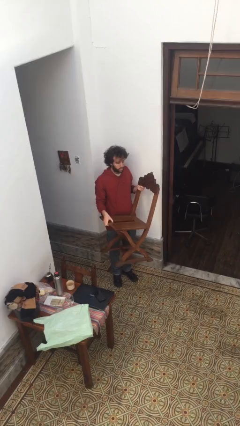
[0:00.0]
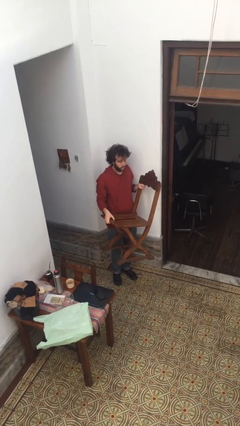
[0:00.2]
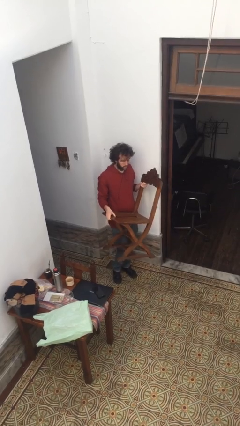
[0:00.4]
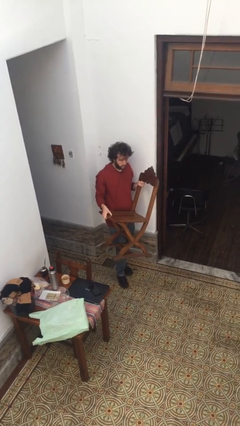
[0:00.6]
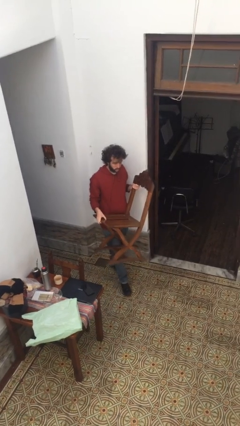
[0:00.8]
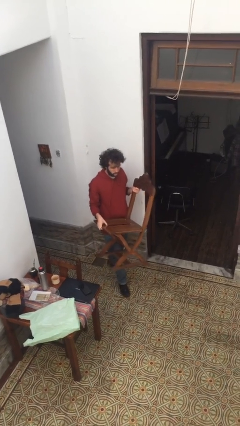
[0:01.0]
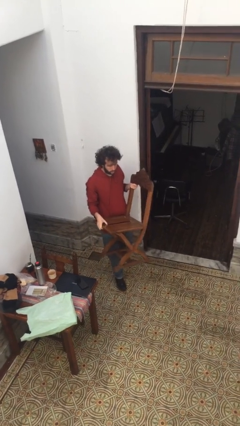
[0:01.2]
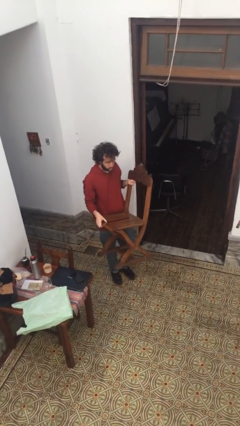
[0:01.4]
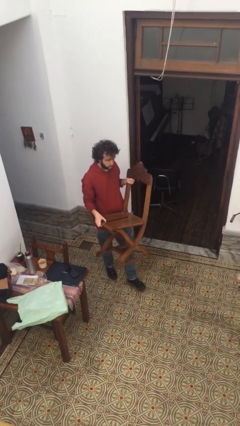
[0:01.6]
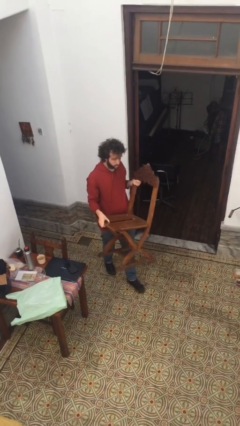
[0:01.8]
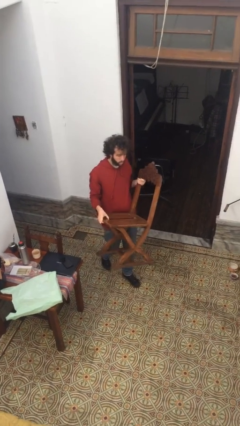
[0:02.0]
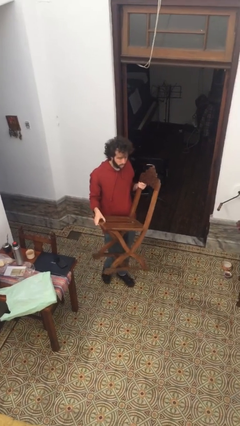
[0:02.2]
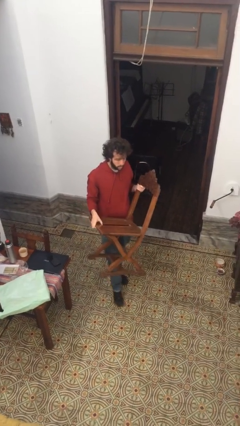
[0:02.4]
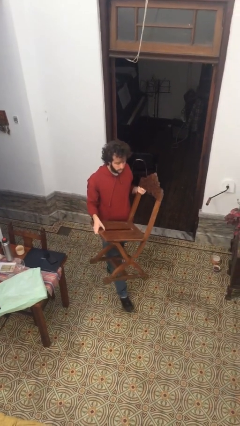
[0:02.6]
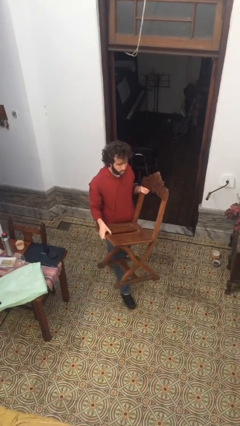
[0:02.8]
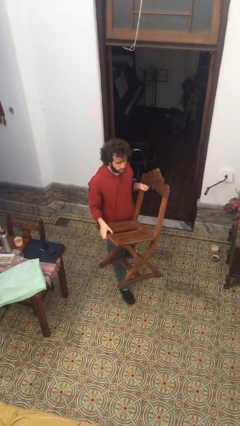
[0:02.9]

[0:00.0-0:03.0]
person carries furniture

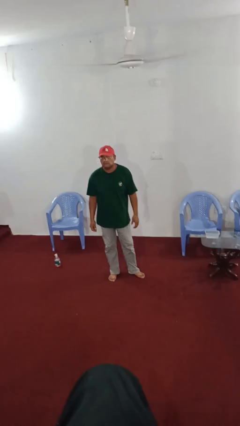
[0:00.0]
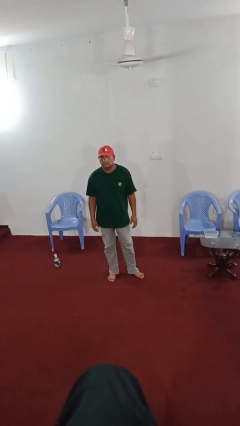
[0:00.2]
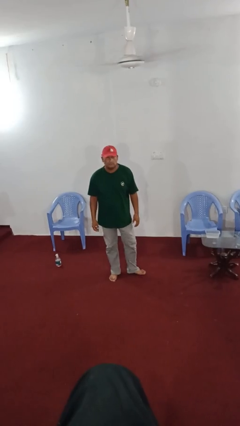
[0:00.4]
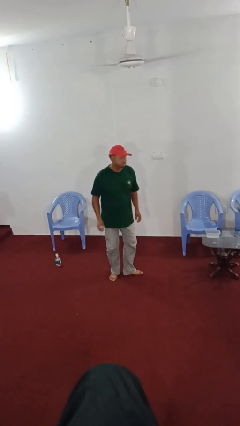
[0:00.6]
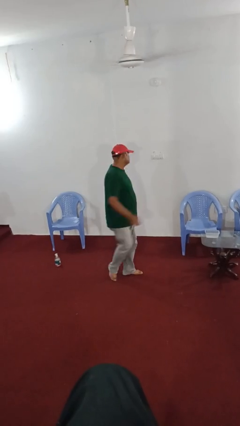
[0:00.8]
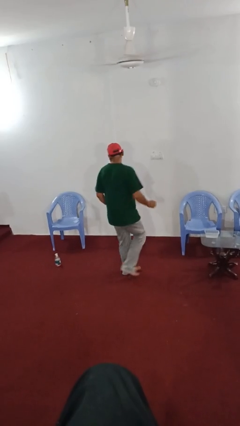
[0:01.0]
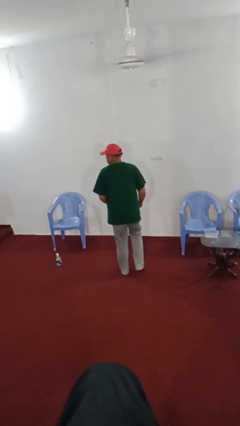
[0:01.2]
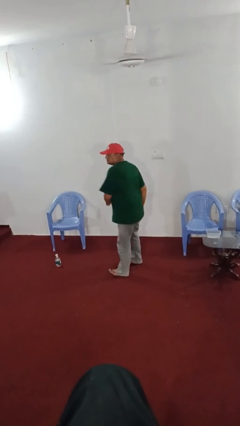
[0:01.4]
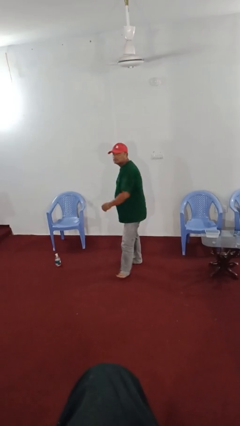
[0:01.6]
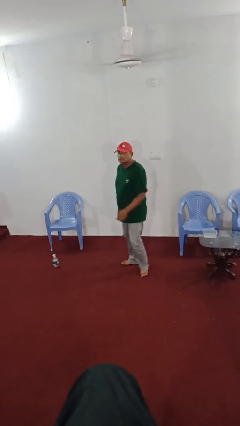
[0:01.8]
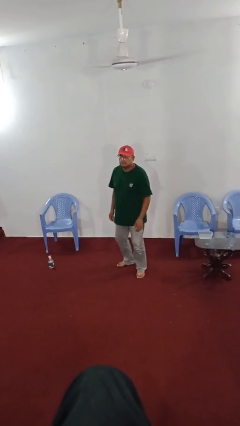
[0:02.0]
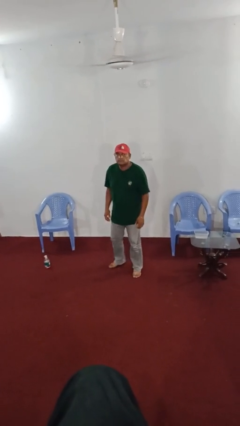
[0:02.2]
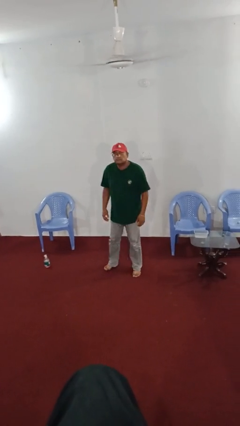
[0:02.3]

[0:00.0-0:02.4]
person twirls

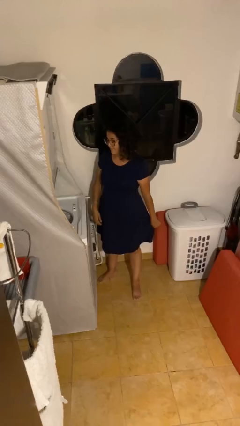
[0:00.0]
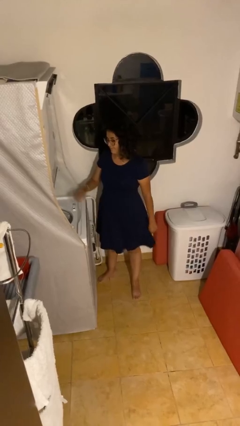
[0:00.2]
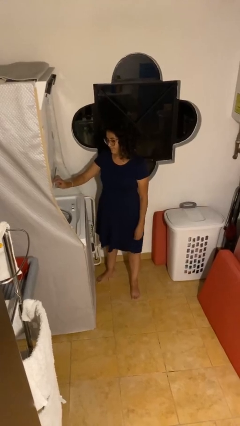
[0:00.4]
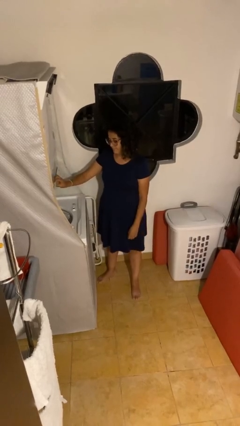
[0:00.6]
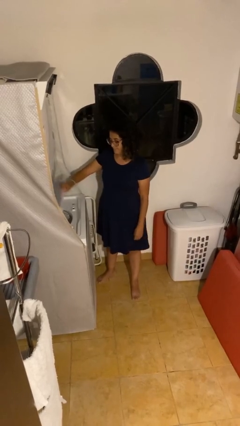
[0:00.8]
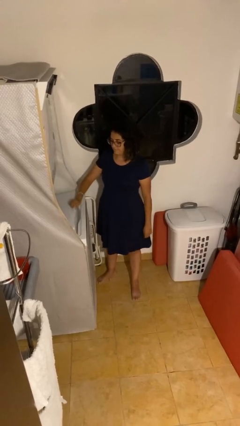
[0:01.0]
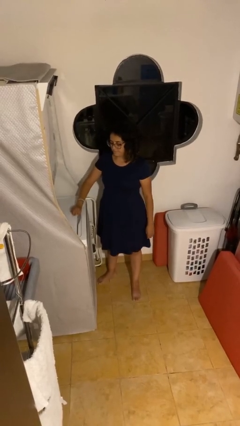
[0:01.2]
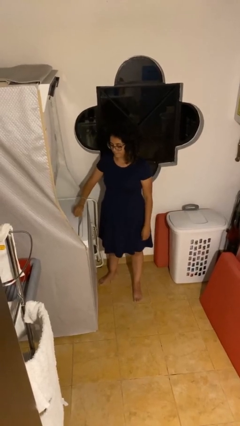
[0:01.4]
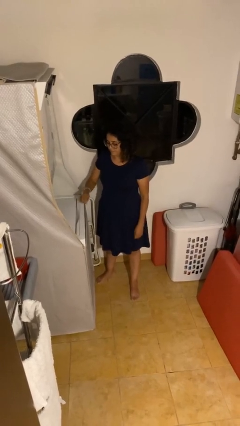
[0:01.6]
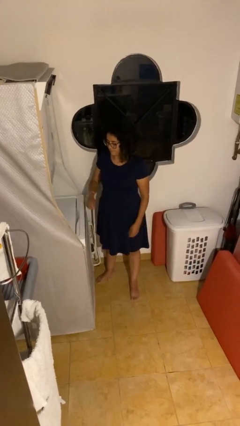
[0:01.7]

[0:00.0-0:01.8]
person closes clothes washer

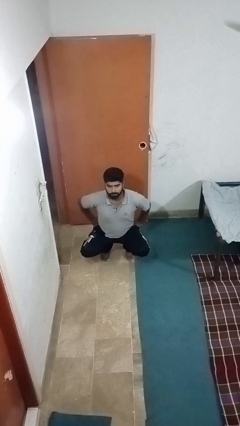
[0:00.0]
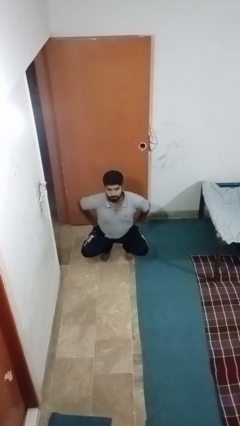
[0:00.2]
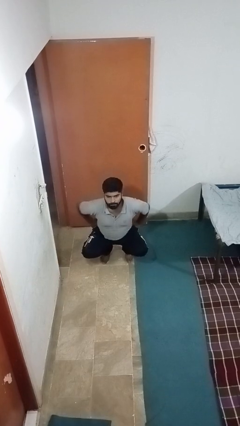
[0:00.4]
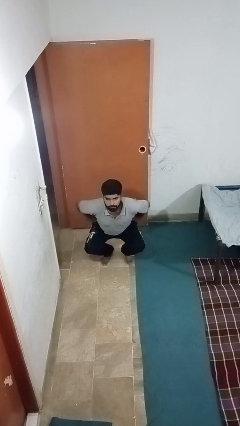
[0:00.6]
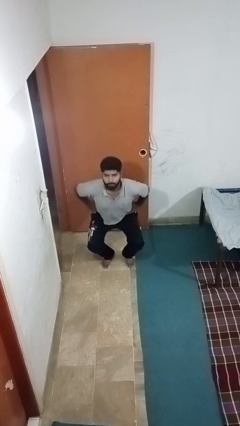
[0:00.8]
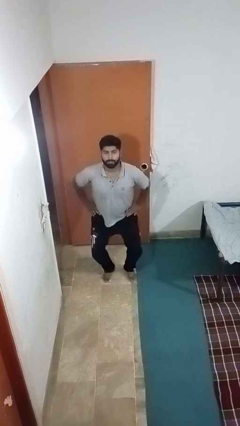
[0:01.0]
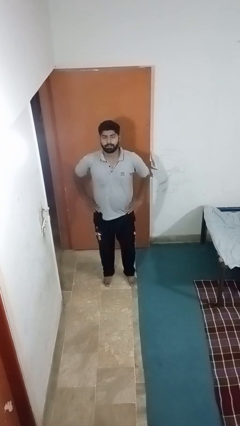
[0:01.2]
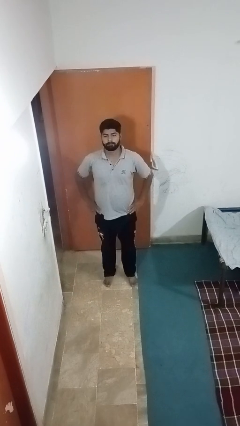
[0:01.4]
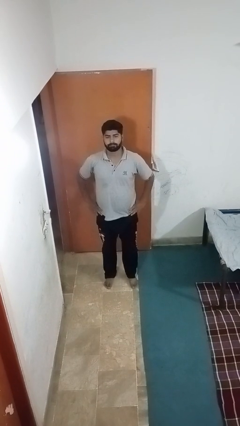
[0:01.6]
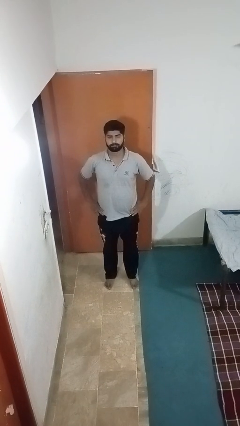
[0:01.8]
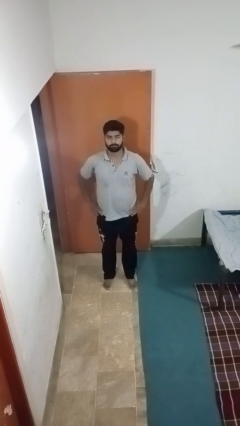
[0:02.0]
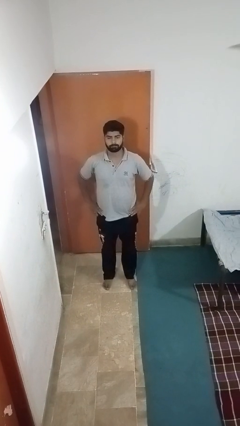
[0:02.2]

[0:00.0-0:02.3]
person stands up

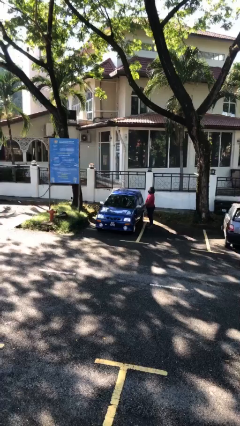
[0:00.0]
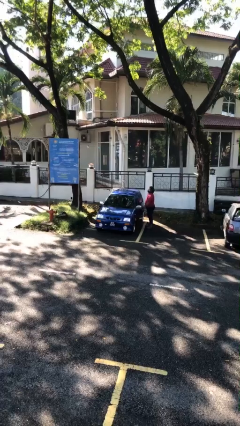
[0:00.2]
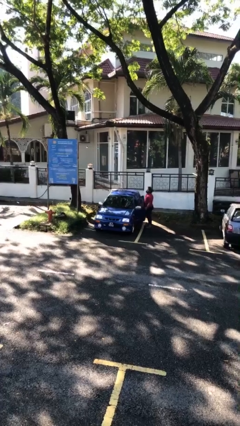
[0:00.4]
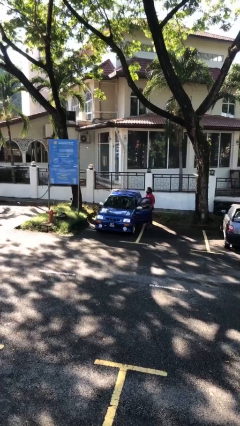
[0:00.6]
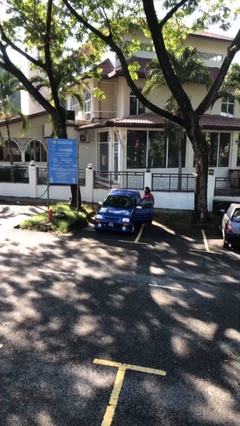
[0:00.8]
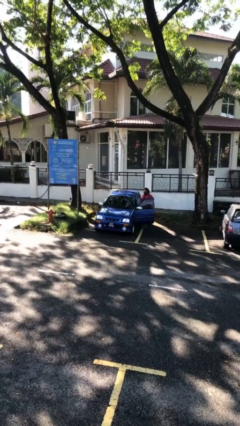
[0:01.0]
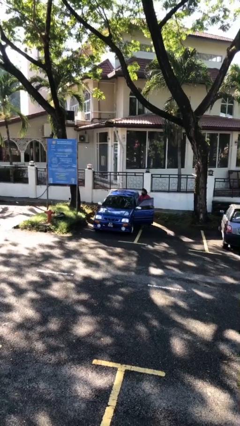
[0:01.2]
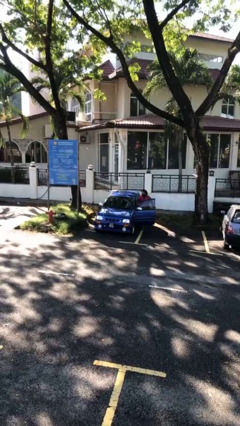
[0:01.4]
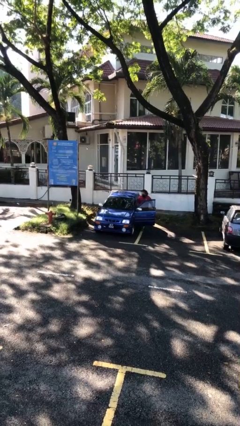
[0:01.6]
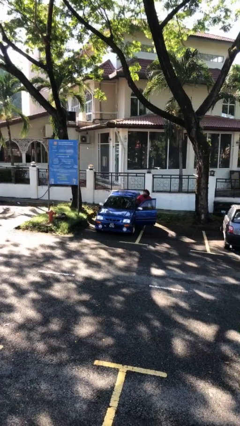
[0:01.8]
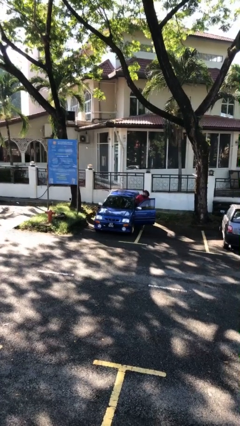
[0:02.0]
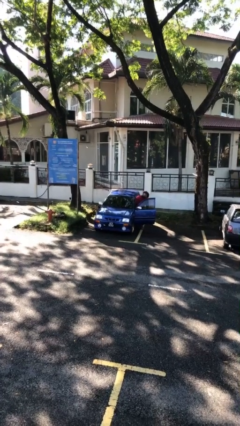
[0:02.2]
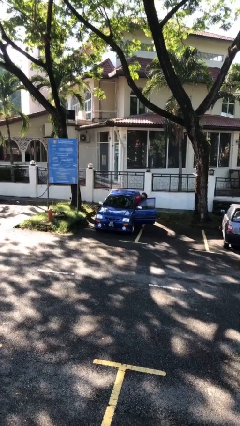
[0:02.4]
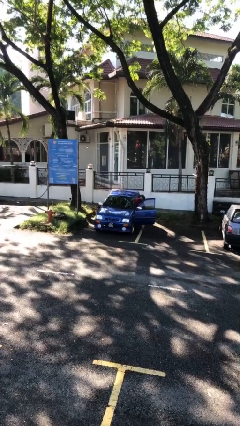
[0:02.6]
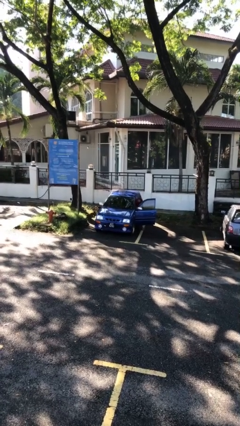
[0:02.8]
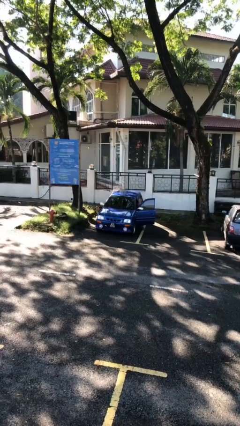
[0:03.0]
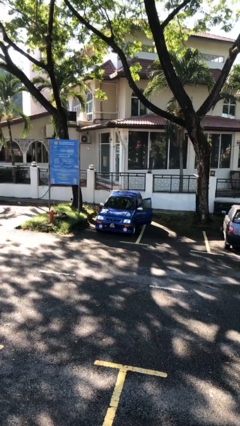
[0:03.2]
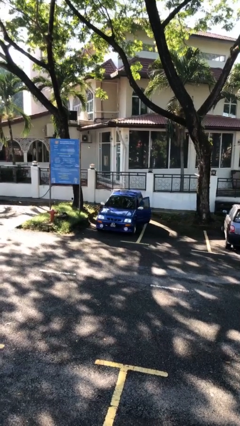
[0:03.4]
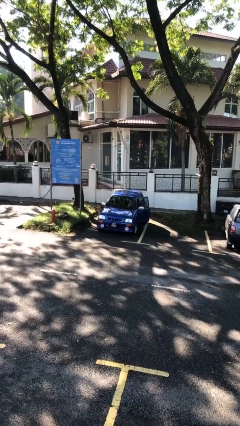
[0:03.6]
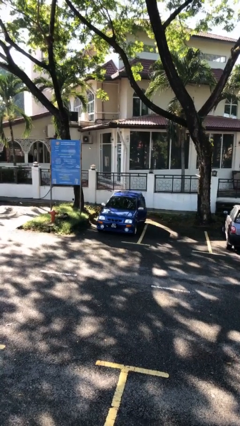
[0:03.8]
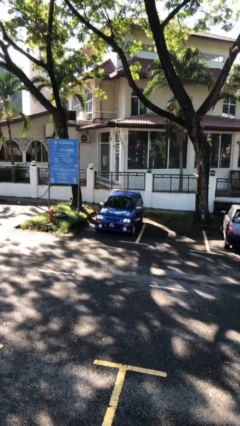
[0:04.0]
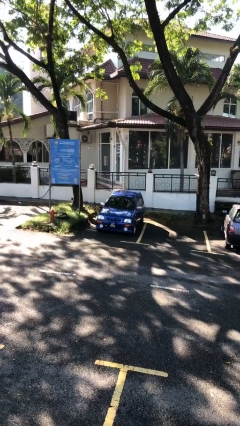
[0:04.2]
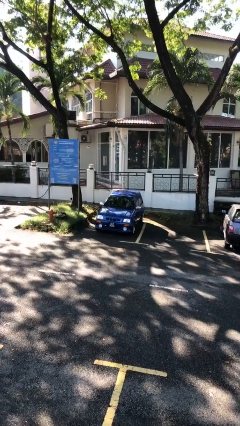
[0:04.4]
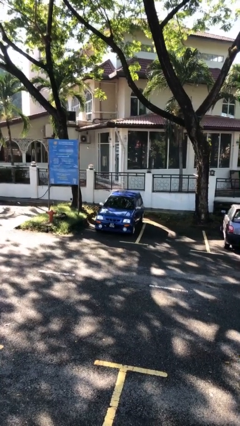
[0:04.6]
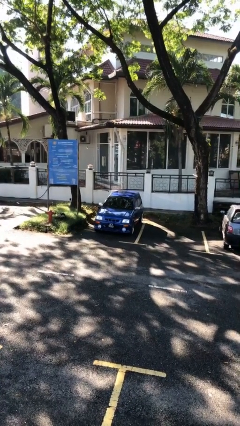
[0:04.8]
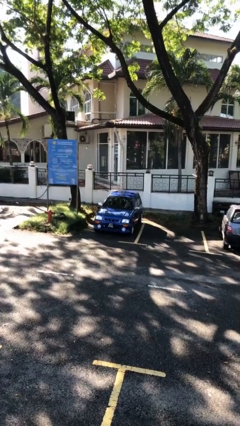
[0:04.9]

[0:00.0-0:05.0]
car picks up person

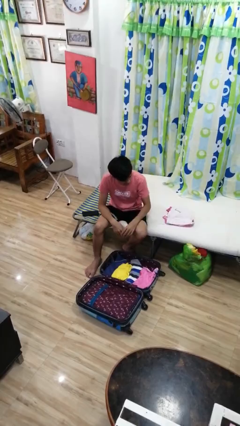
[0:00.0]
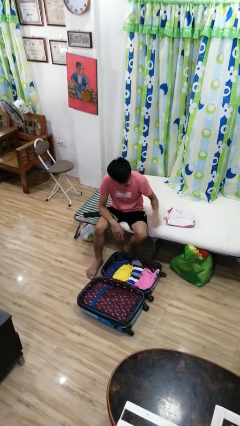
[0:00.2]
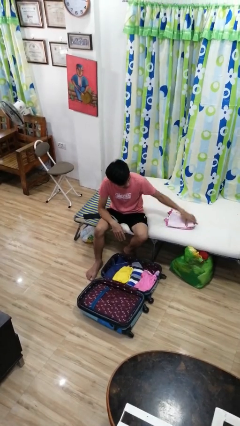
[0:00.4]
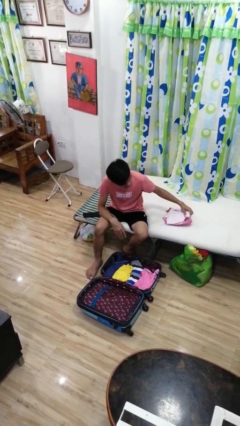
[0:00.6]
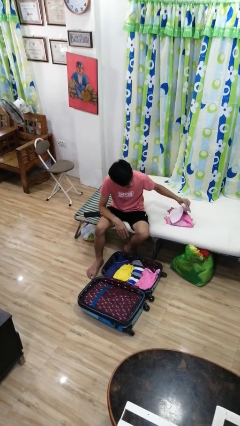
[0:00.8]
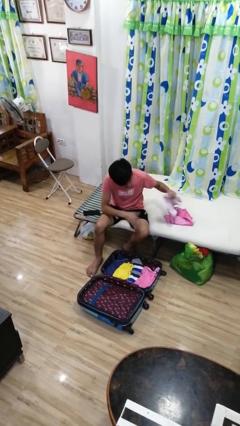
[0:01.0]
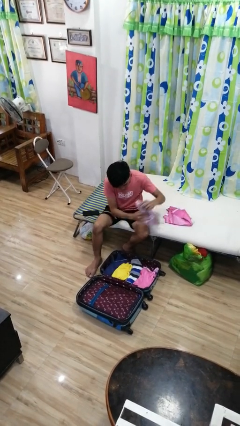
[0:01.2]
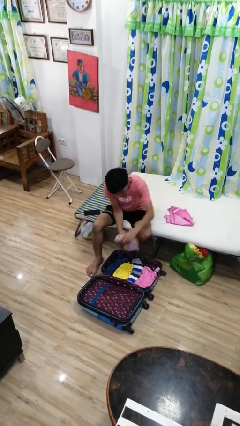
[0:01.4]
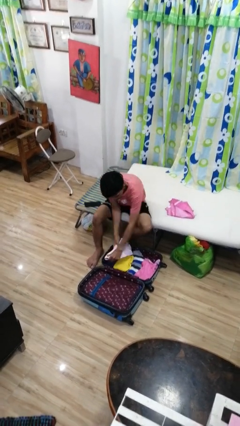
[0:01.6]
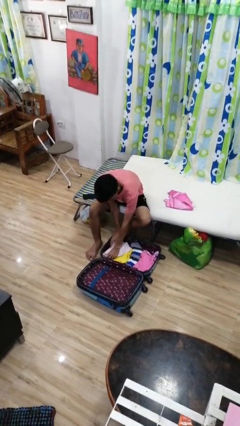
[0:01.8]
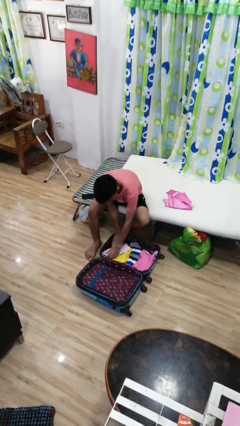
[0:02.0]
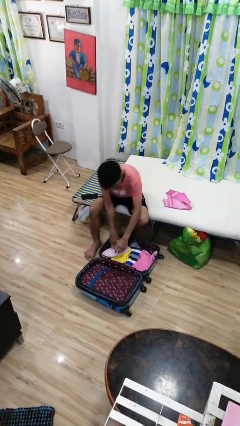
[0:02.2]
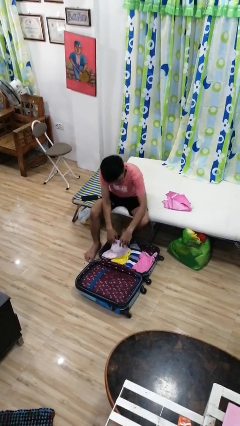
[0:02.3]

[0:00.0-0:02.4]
person loads clothes into suitcase

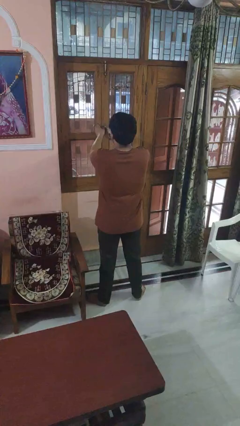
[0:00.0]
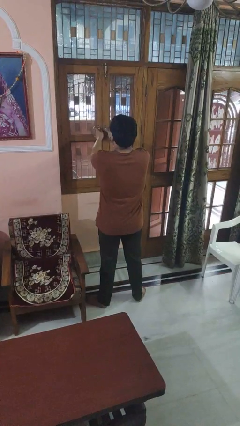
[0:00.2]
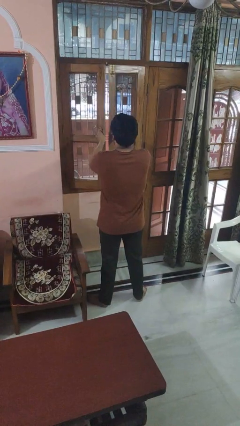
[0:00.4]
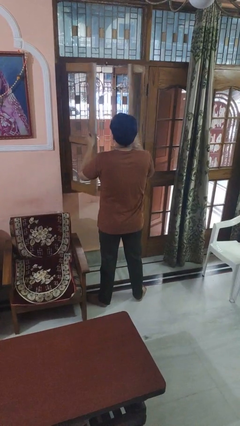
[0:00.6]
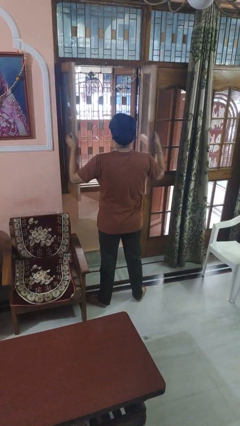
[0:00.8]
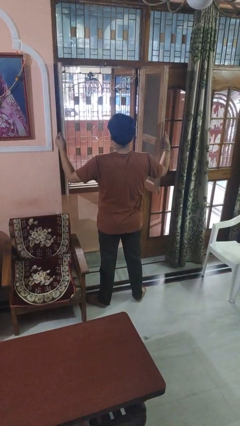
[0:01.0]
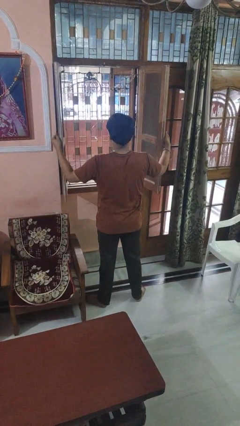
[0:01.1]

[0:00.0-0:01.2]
person opens home window
